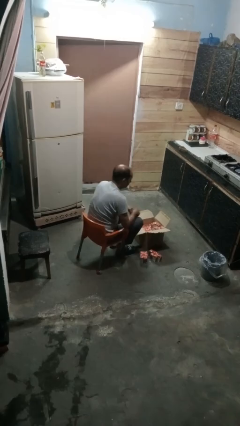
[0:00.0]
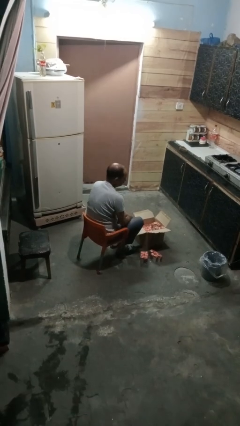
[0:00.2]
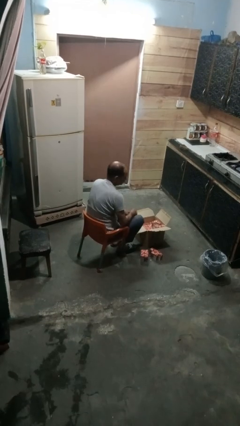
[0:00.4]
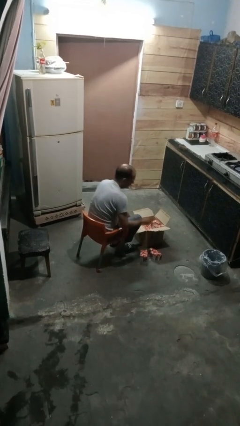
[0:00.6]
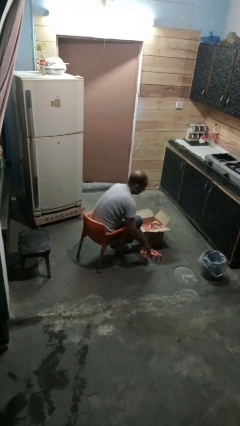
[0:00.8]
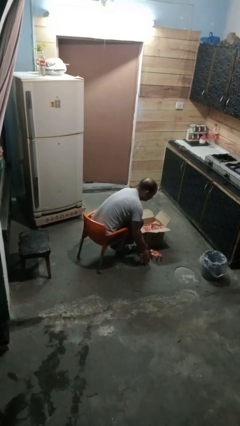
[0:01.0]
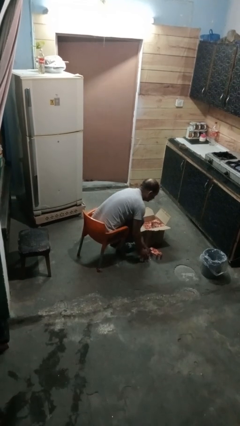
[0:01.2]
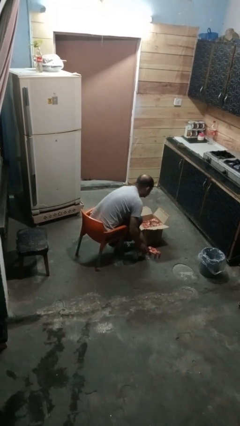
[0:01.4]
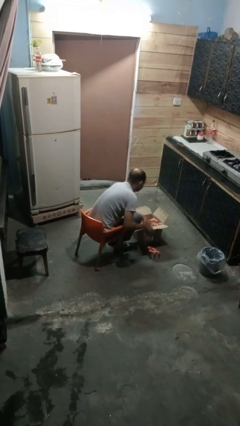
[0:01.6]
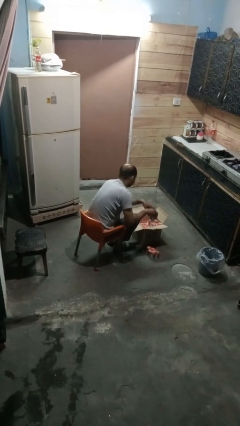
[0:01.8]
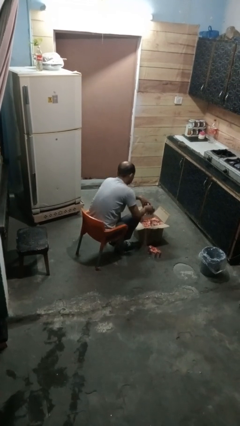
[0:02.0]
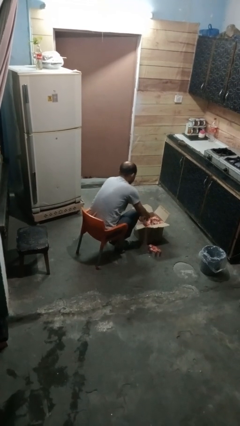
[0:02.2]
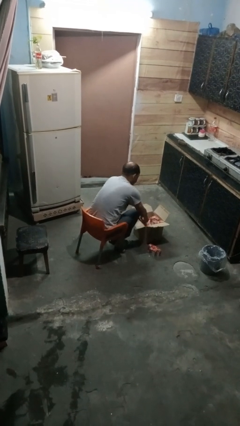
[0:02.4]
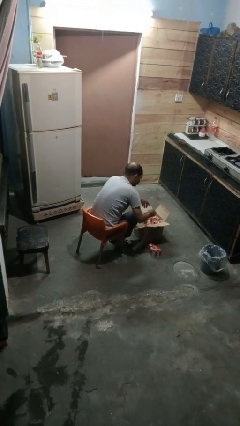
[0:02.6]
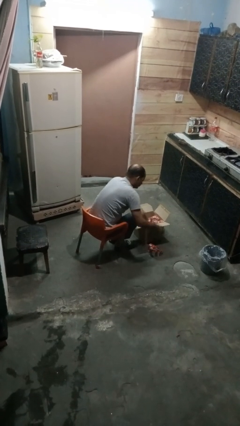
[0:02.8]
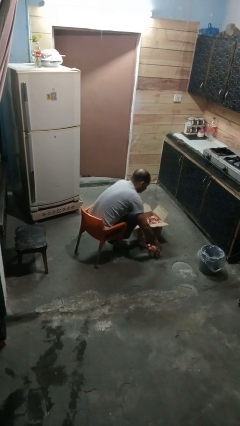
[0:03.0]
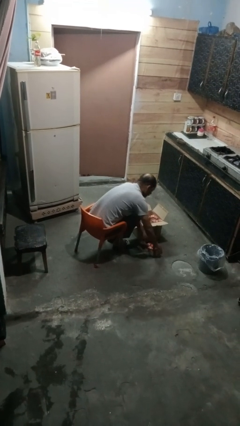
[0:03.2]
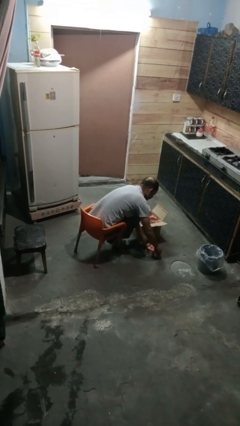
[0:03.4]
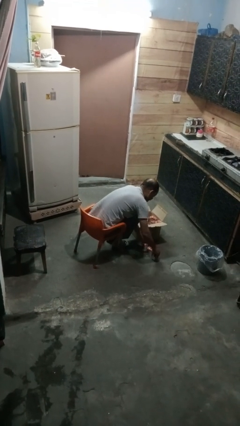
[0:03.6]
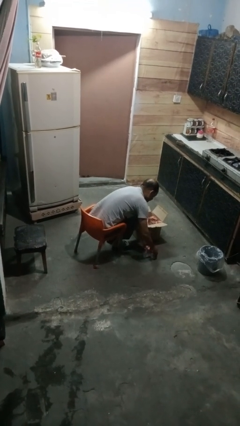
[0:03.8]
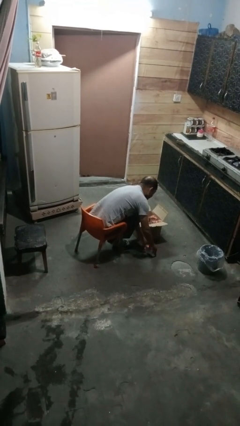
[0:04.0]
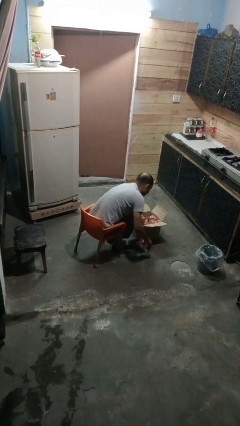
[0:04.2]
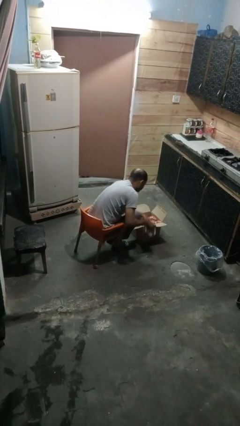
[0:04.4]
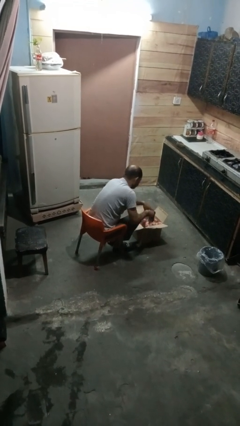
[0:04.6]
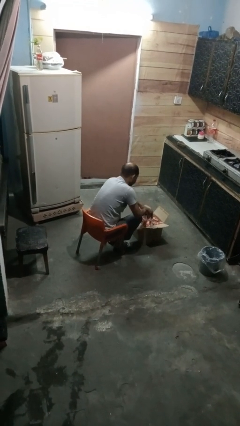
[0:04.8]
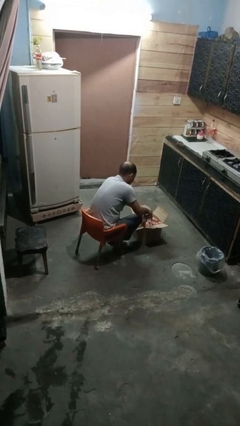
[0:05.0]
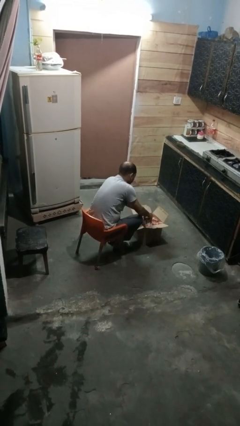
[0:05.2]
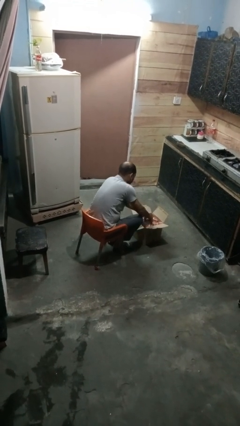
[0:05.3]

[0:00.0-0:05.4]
person puts object into box

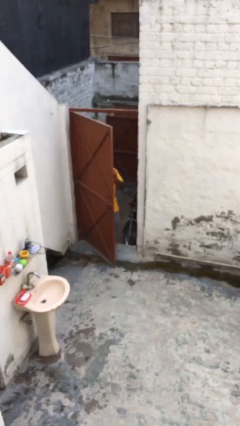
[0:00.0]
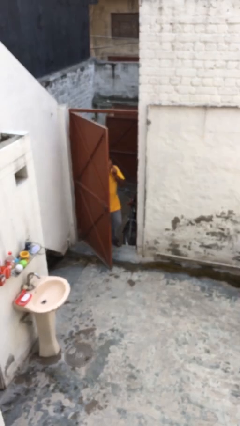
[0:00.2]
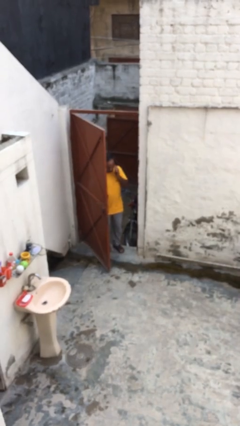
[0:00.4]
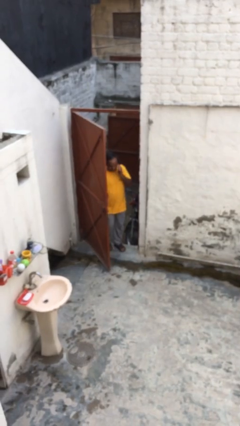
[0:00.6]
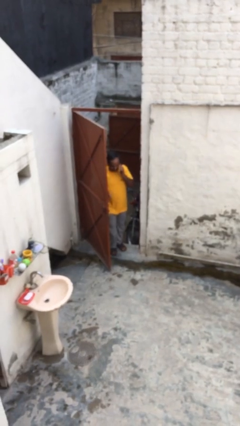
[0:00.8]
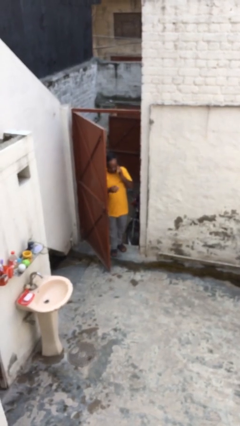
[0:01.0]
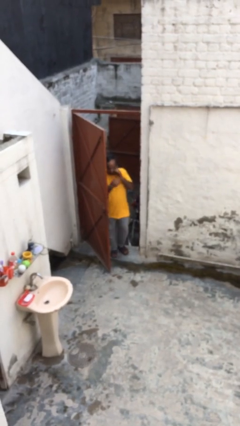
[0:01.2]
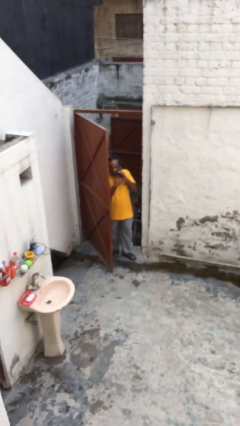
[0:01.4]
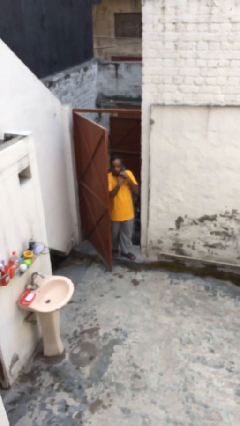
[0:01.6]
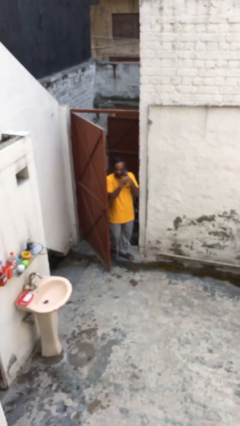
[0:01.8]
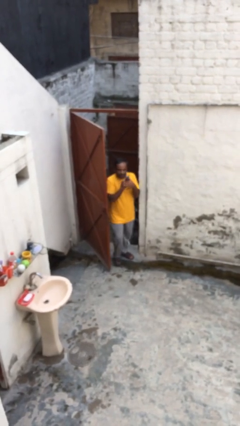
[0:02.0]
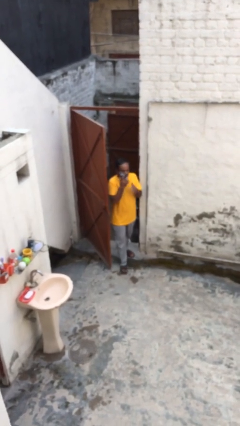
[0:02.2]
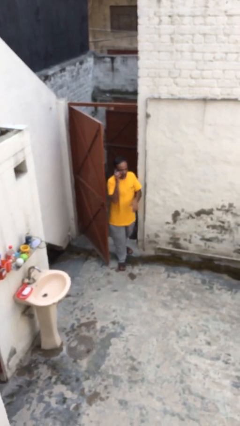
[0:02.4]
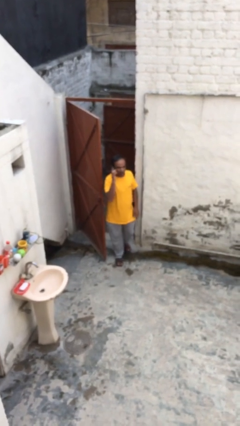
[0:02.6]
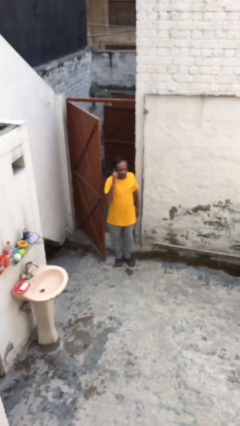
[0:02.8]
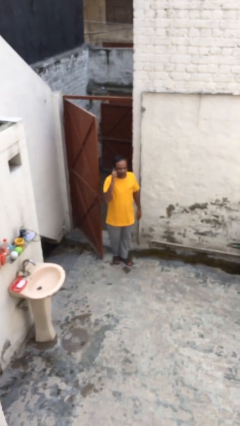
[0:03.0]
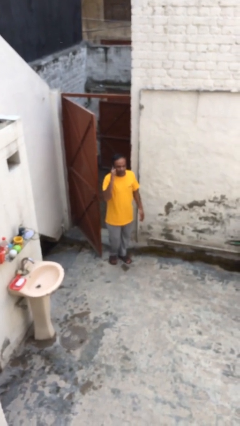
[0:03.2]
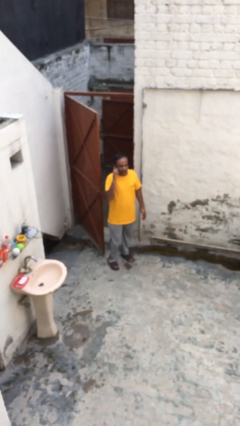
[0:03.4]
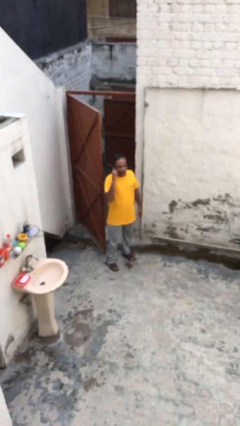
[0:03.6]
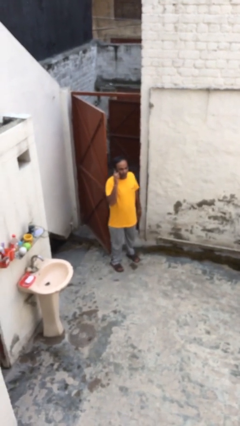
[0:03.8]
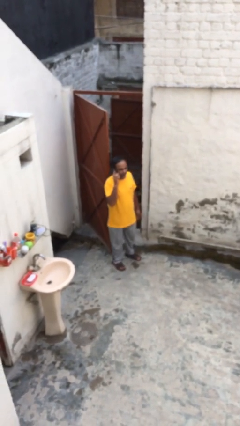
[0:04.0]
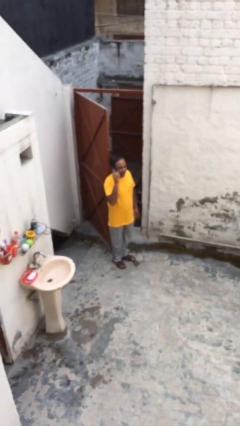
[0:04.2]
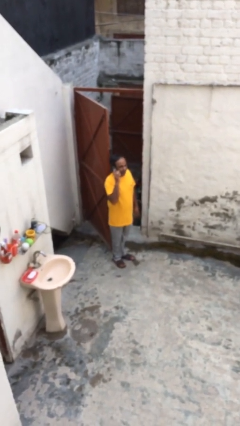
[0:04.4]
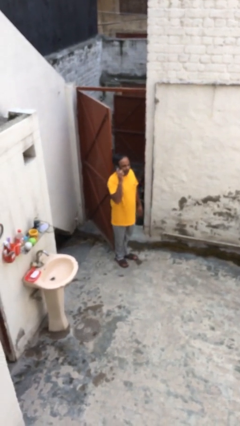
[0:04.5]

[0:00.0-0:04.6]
person enters scene through structure

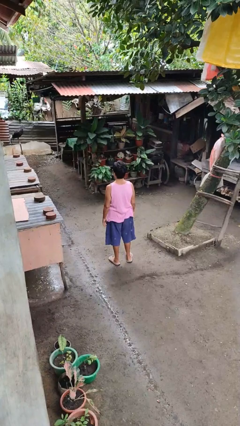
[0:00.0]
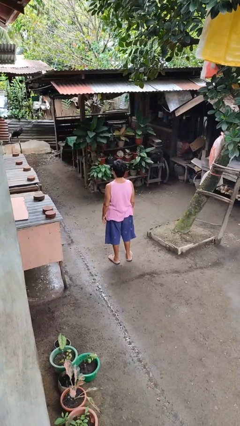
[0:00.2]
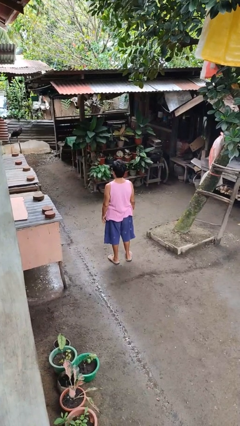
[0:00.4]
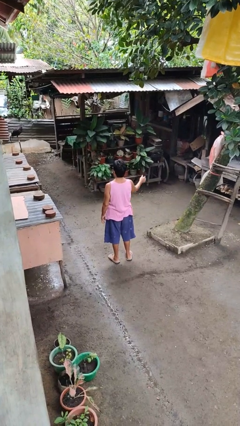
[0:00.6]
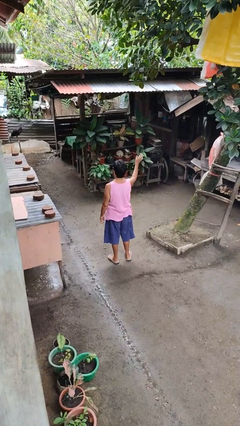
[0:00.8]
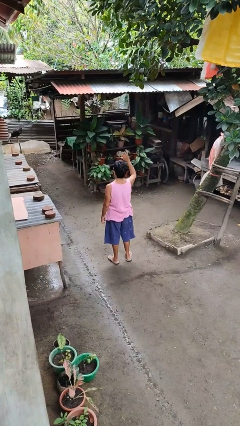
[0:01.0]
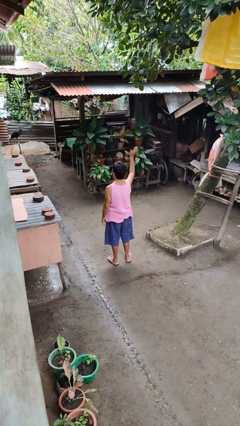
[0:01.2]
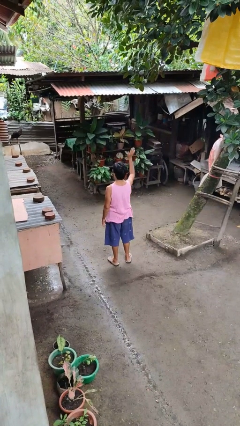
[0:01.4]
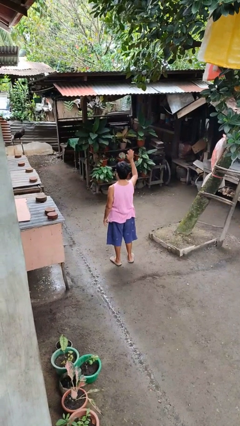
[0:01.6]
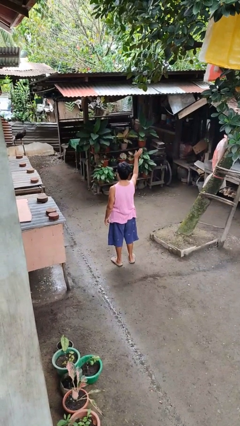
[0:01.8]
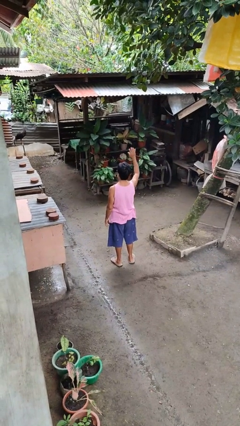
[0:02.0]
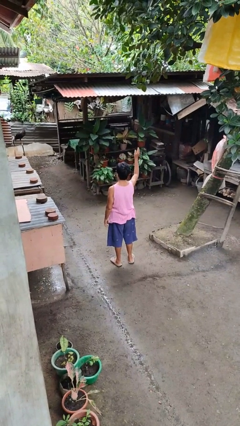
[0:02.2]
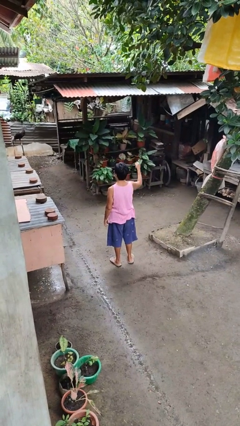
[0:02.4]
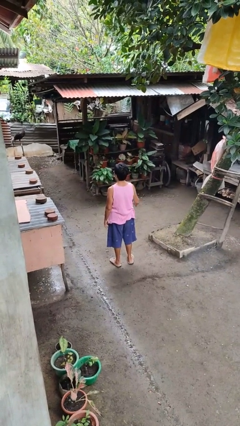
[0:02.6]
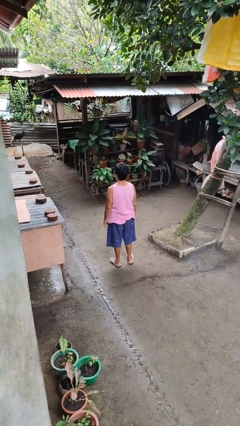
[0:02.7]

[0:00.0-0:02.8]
person waves at person

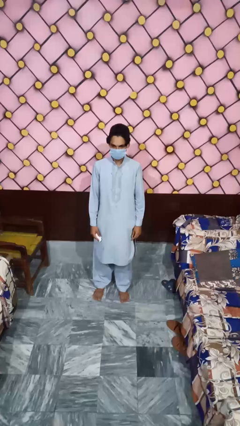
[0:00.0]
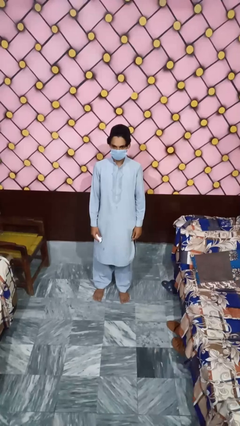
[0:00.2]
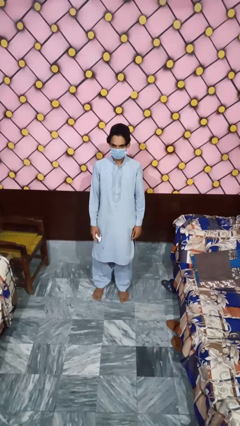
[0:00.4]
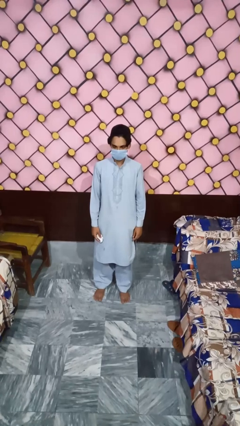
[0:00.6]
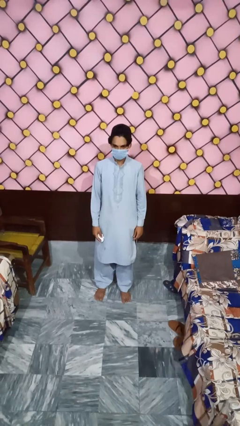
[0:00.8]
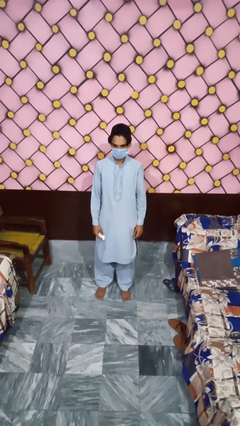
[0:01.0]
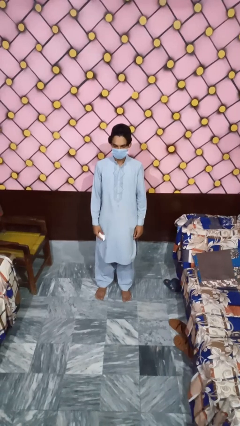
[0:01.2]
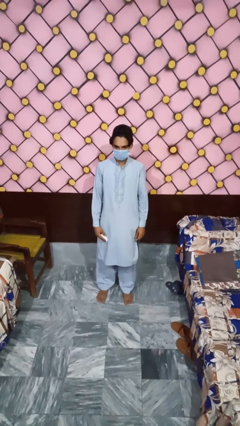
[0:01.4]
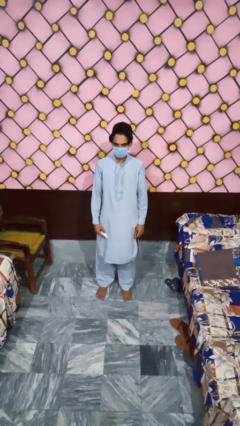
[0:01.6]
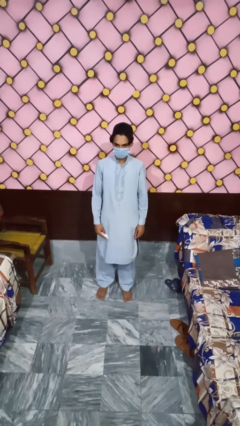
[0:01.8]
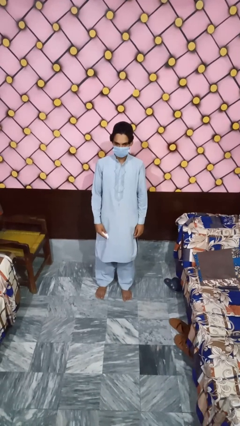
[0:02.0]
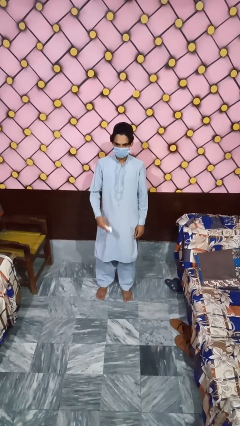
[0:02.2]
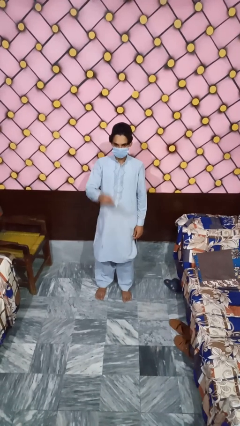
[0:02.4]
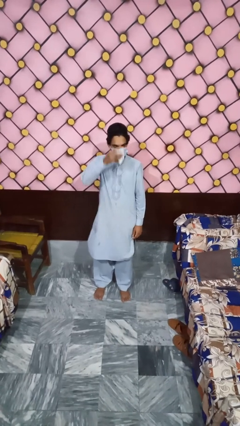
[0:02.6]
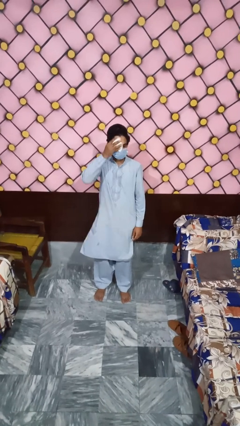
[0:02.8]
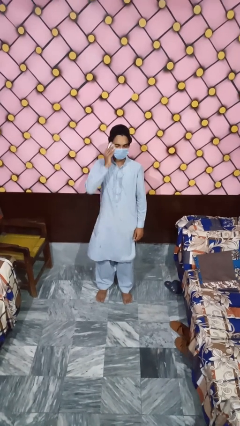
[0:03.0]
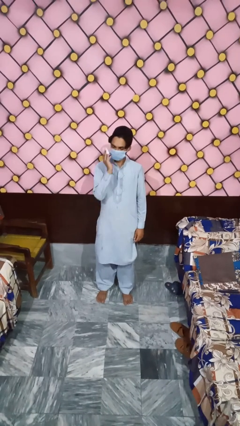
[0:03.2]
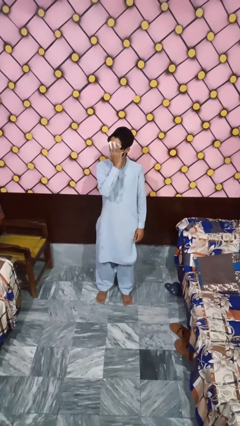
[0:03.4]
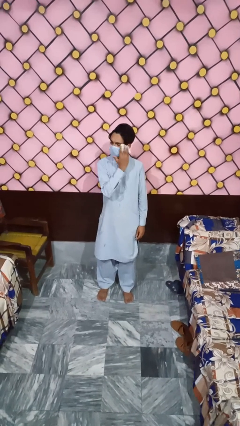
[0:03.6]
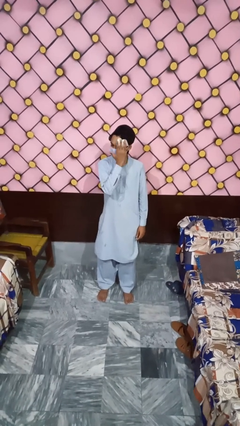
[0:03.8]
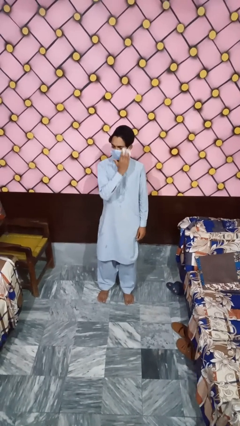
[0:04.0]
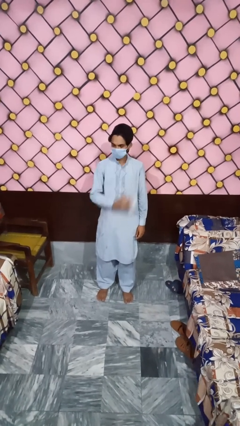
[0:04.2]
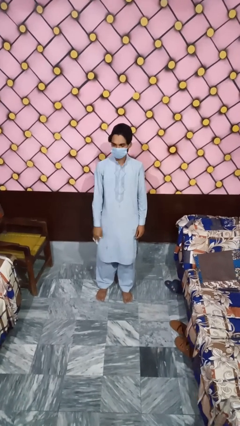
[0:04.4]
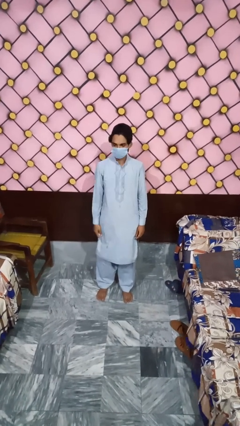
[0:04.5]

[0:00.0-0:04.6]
person wipes mouth with napkin

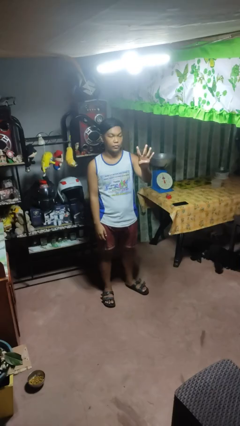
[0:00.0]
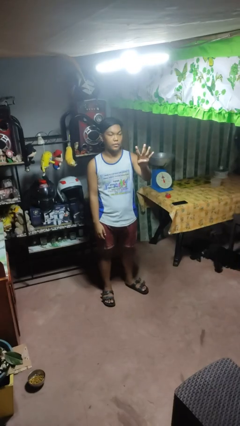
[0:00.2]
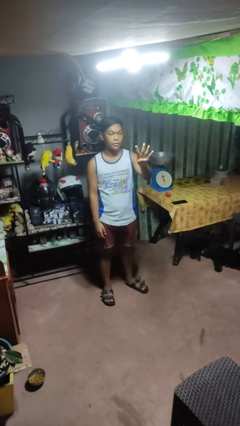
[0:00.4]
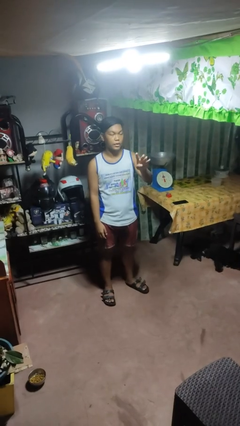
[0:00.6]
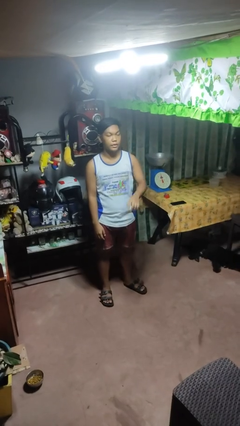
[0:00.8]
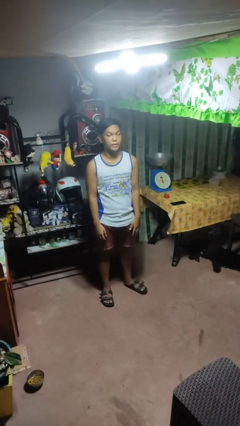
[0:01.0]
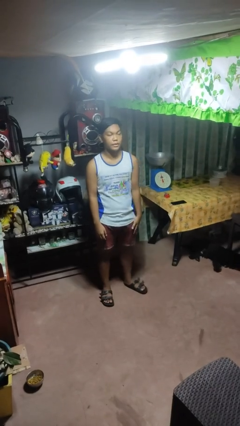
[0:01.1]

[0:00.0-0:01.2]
person gestures number four
